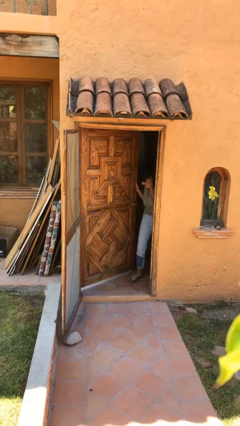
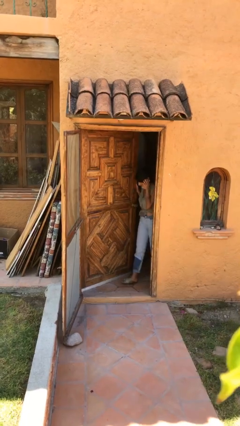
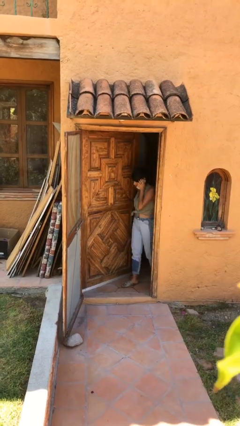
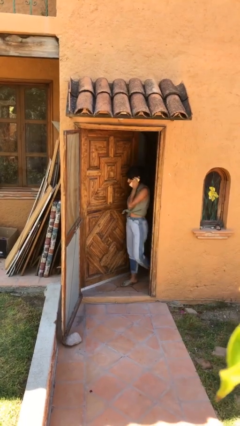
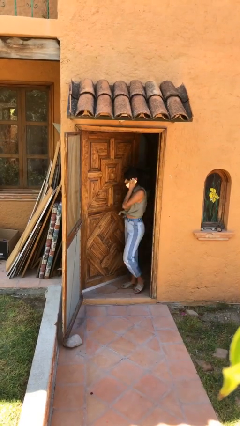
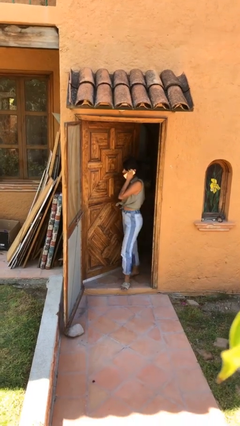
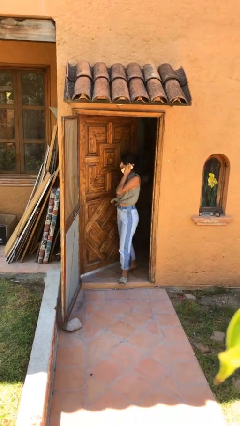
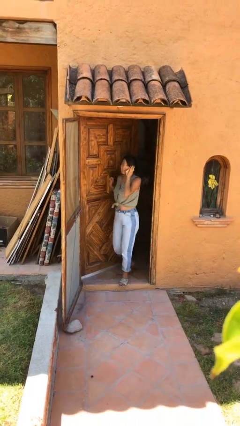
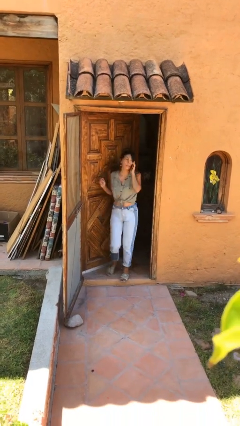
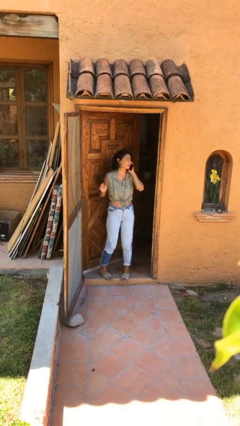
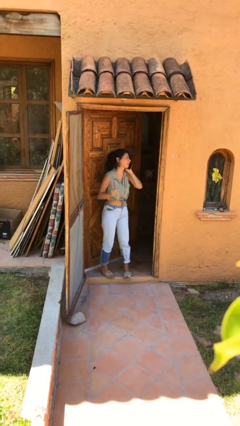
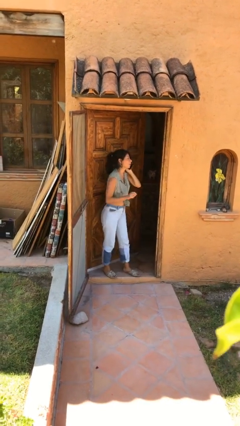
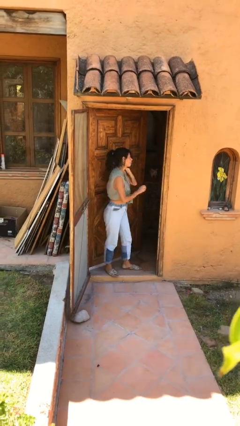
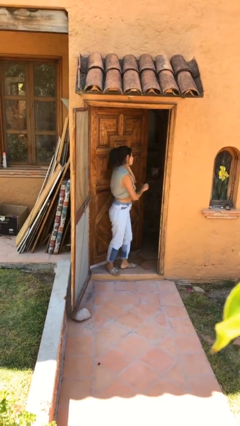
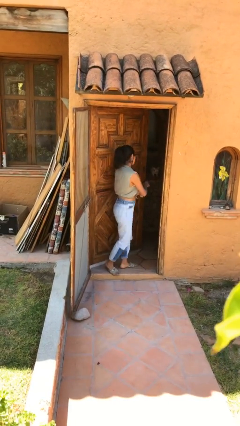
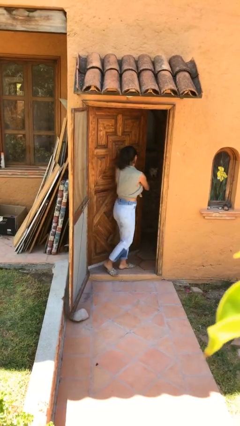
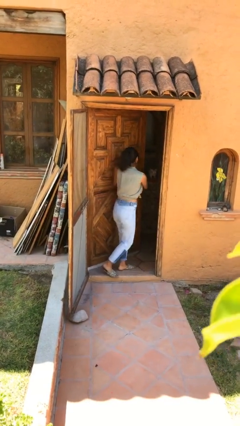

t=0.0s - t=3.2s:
person enters scene through structure

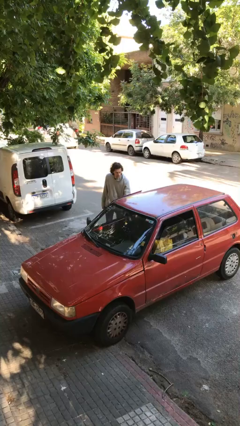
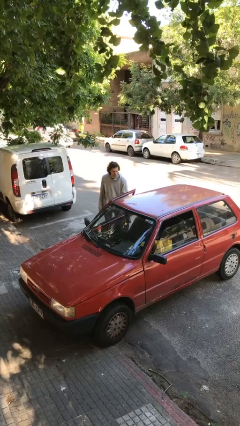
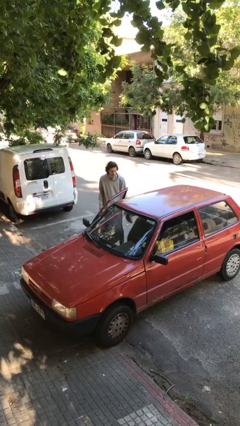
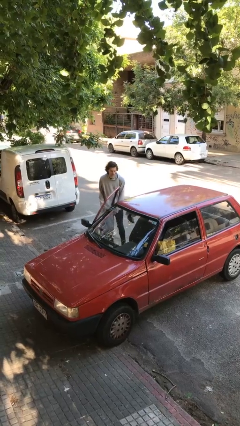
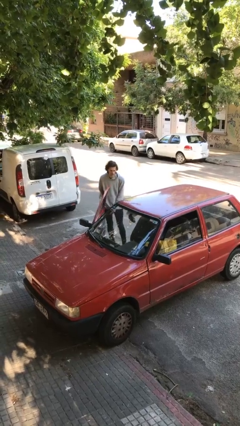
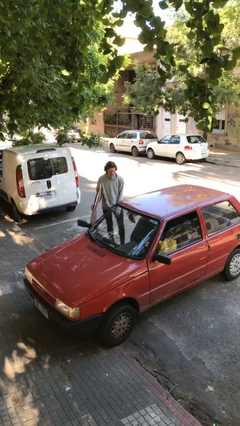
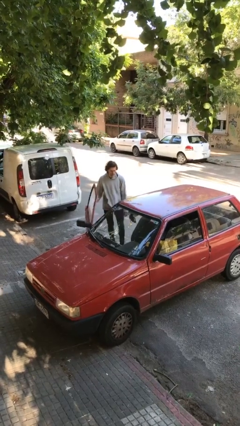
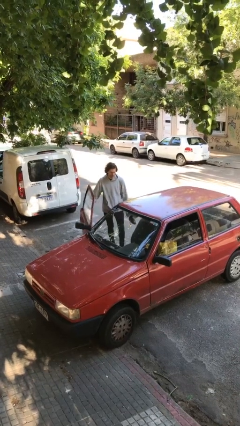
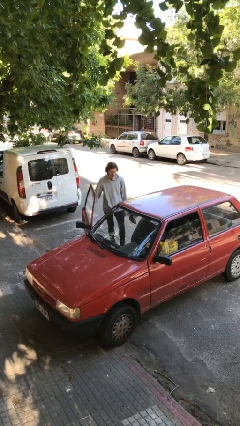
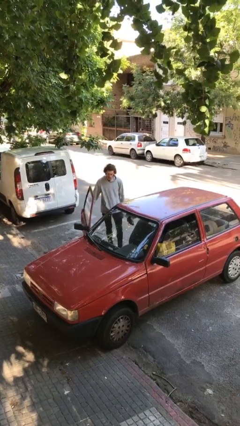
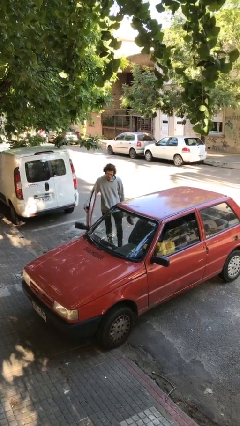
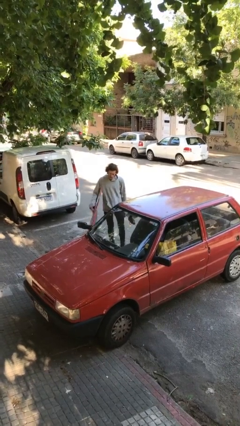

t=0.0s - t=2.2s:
person opens car door

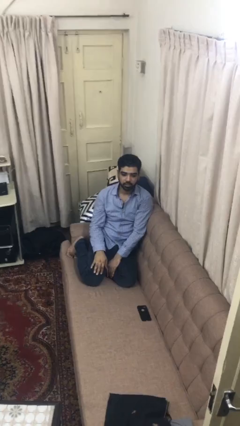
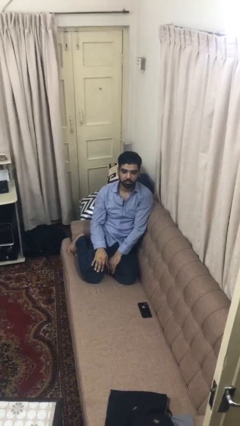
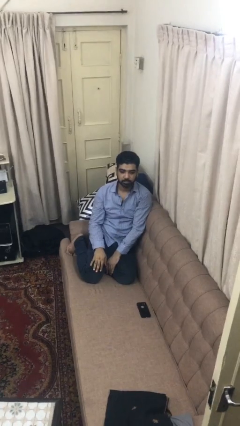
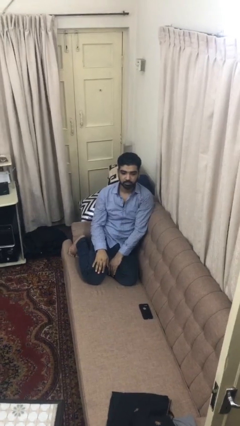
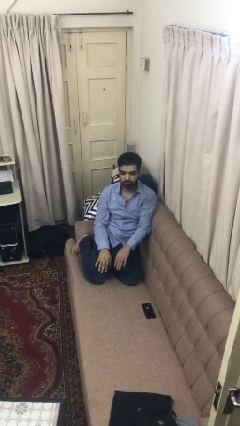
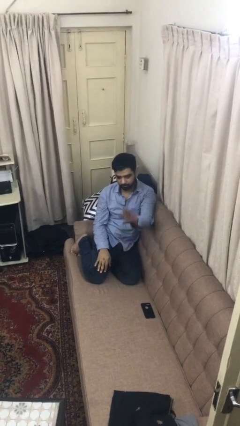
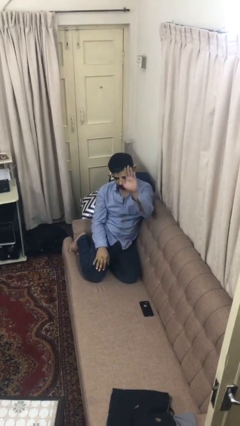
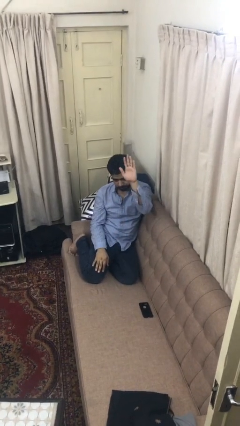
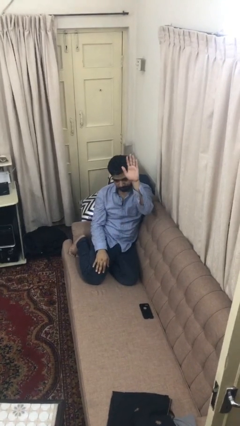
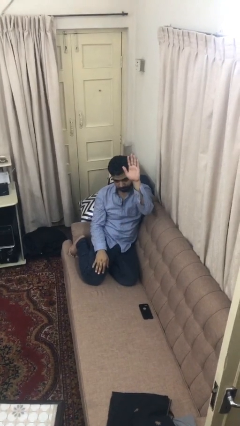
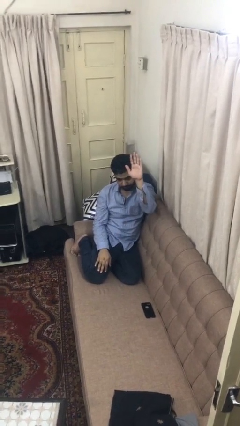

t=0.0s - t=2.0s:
person gestures raise hand

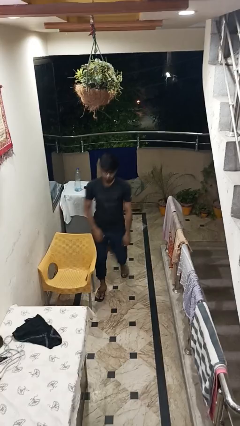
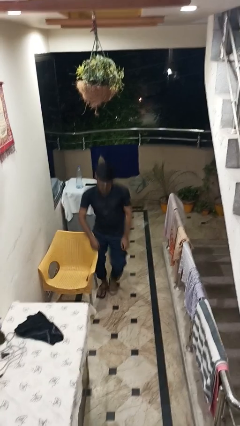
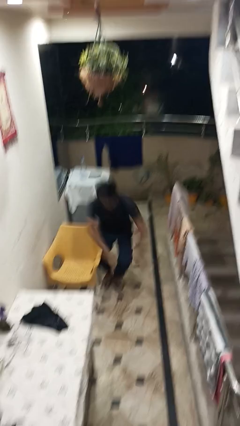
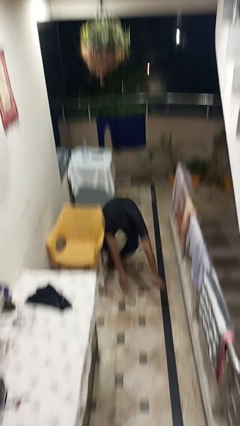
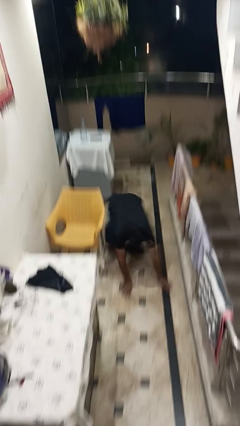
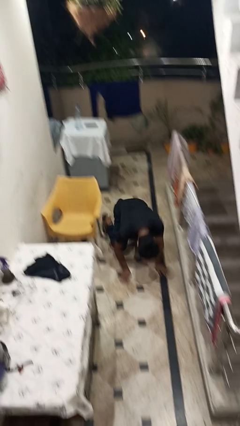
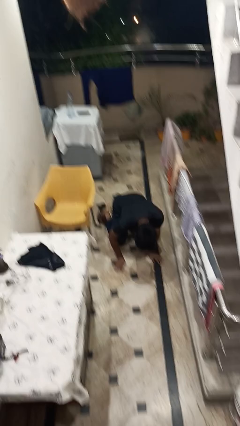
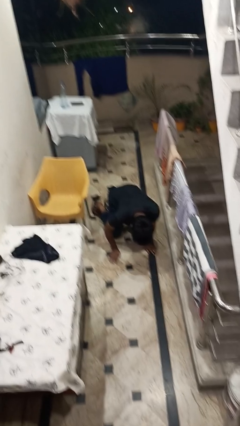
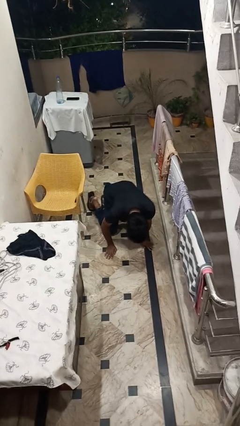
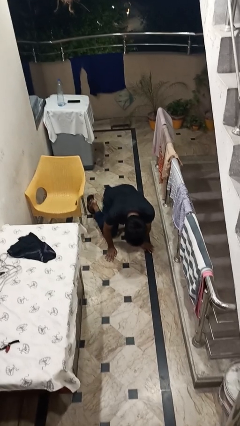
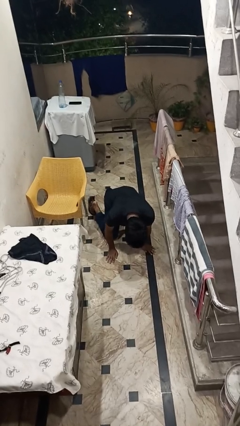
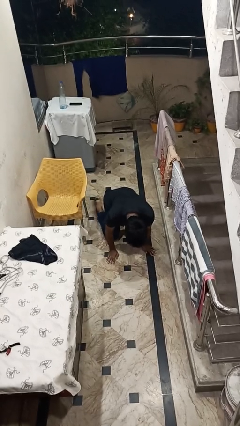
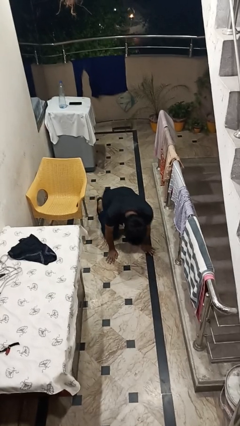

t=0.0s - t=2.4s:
person trips on object on floor

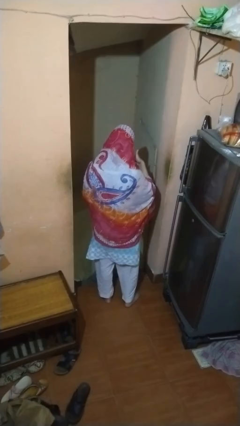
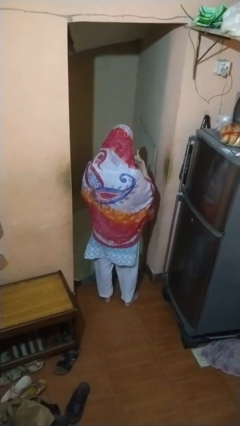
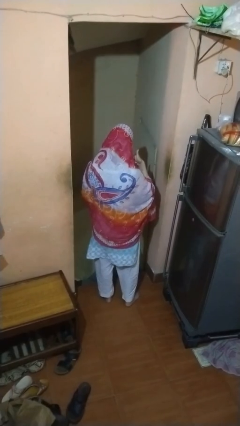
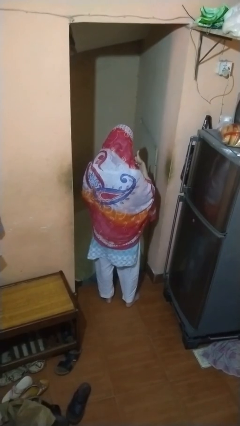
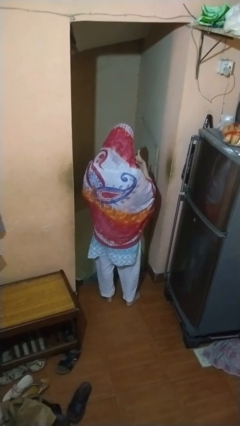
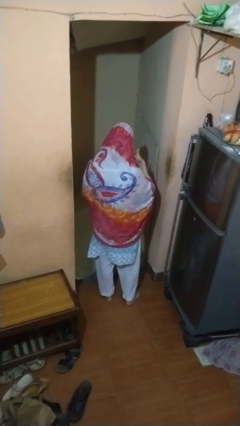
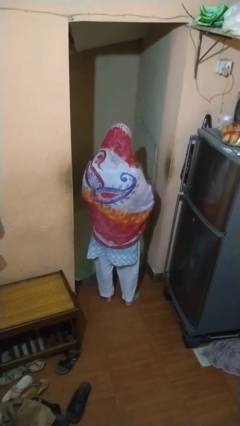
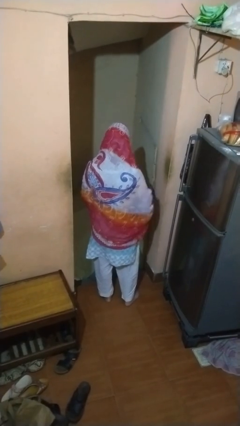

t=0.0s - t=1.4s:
person gestures call me

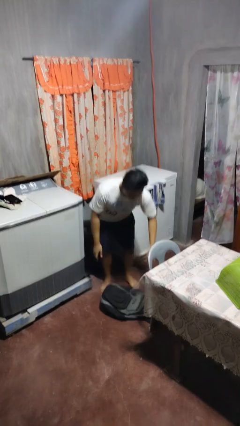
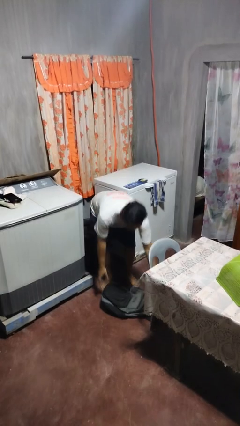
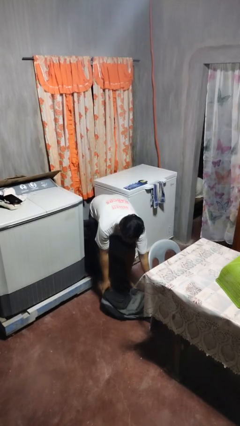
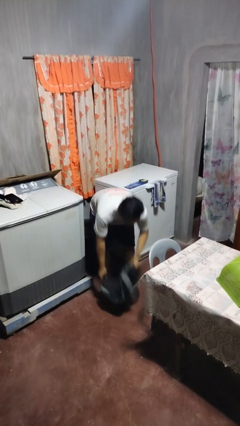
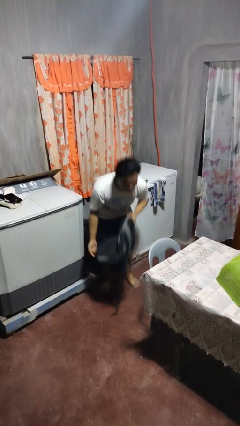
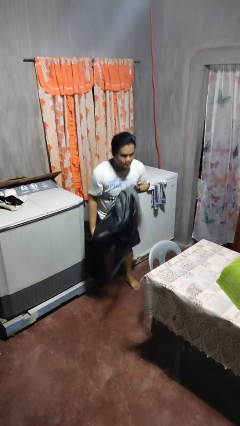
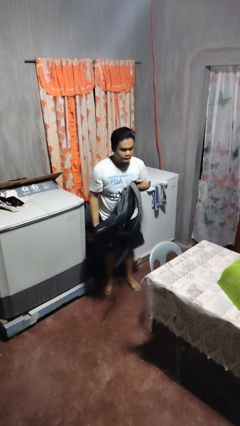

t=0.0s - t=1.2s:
person picks up object from floor

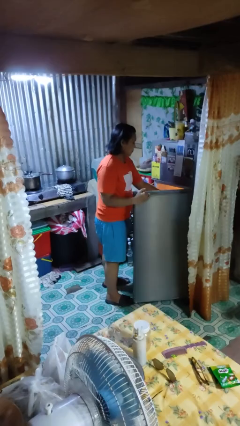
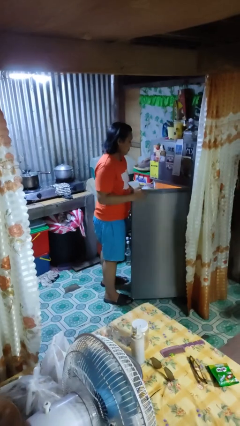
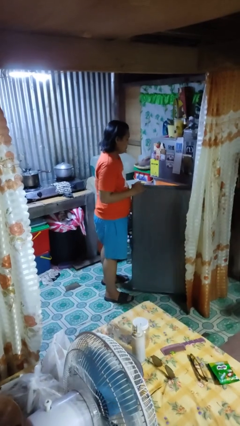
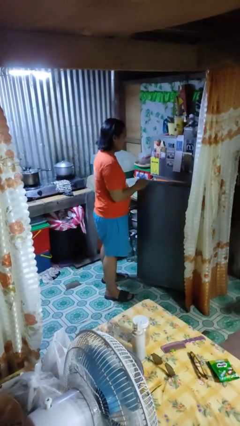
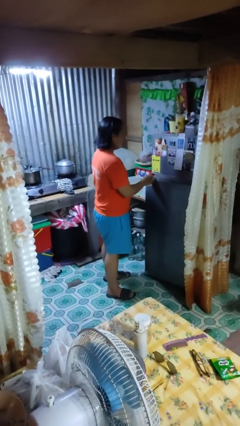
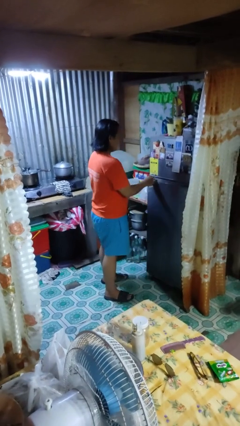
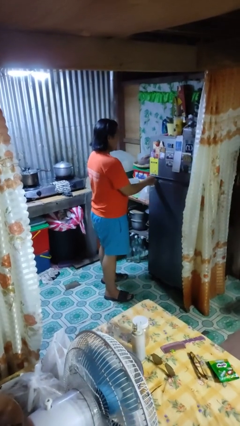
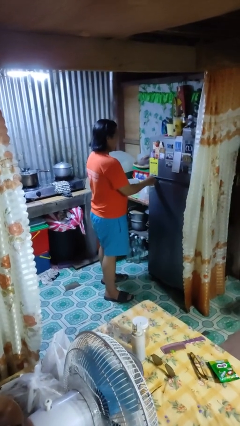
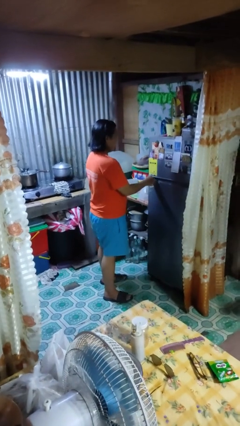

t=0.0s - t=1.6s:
person closes refrigerator

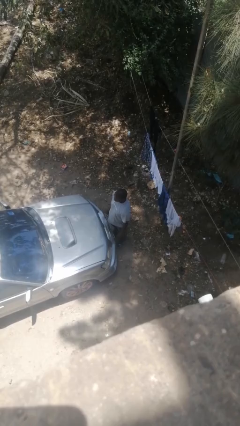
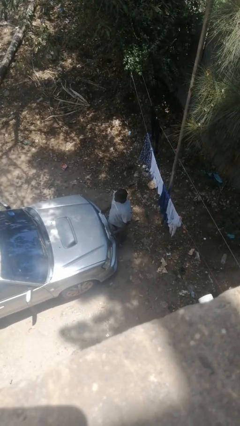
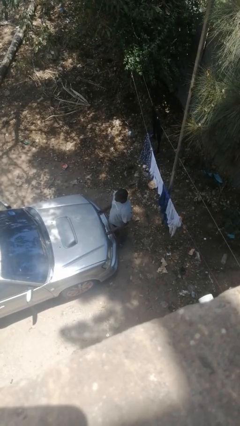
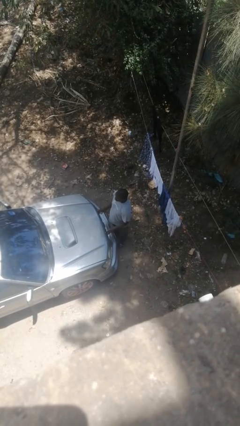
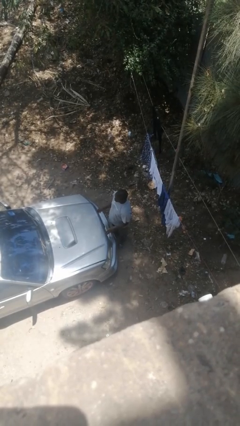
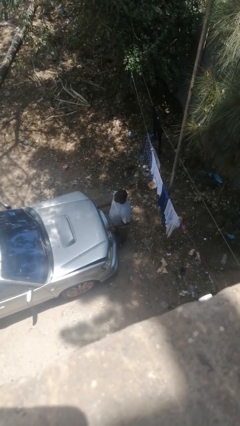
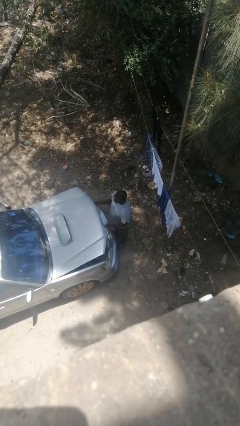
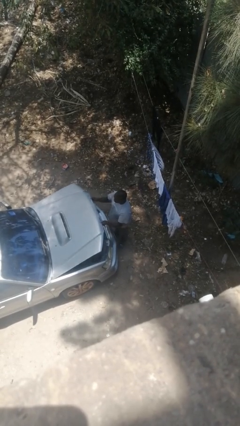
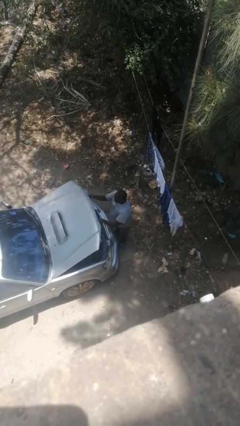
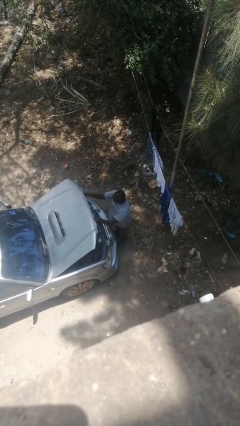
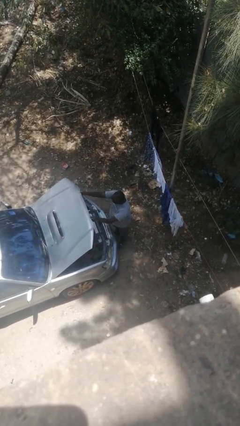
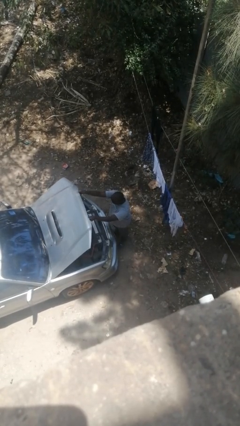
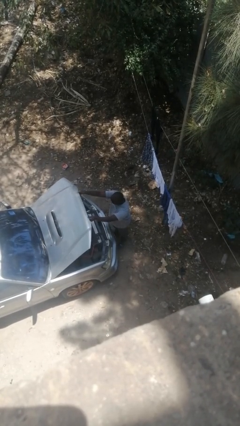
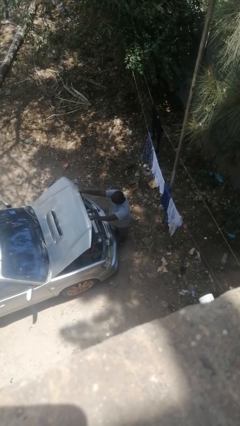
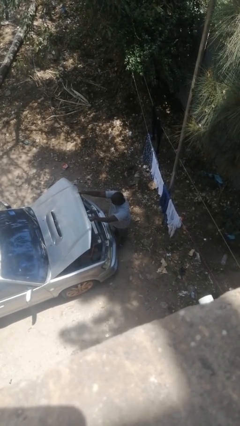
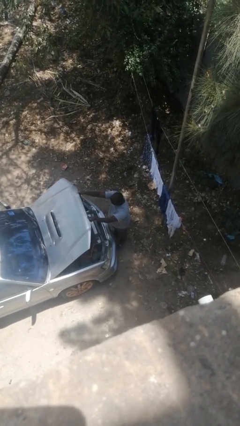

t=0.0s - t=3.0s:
person opens car hood
